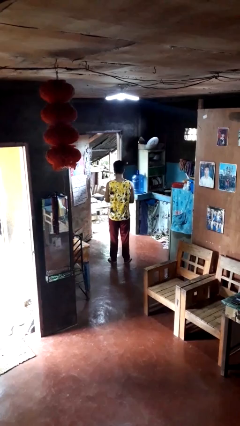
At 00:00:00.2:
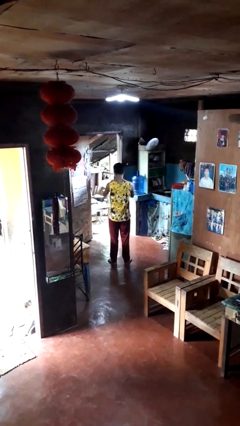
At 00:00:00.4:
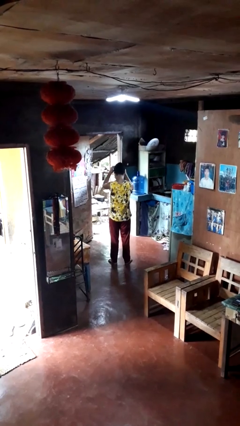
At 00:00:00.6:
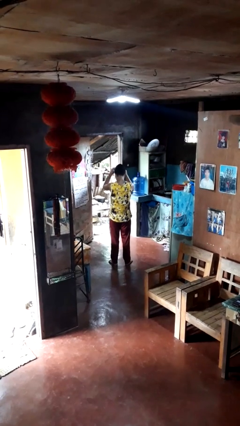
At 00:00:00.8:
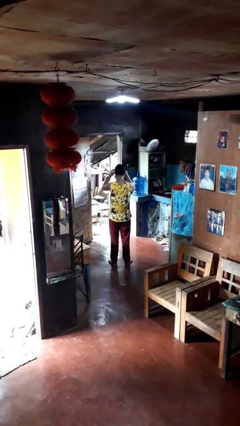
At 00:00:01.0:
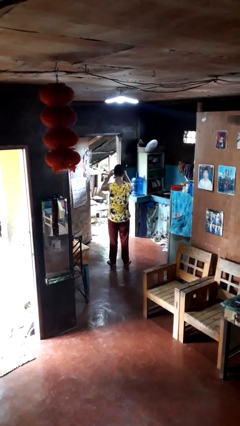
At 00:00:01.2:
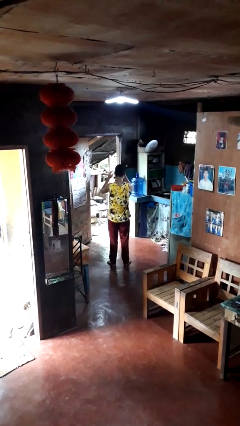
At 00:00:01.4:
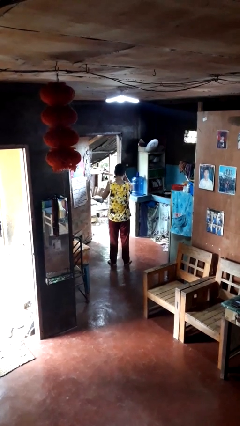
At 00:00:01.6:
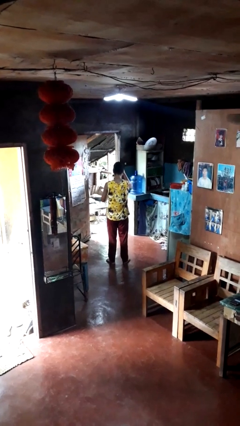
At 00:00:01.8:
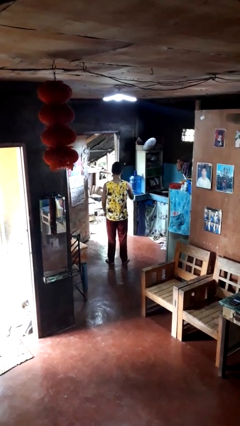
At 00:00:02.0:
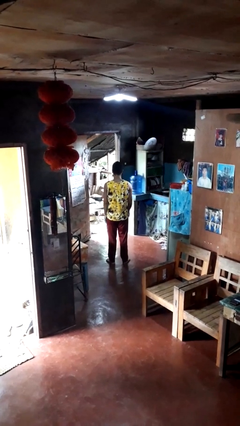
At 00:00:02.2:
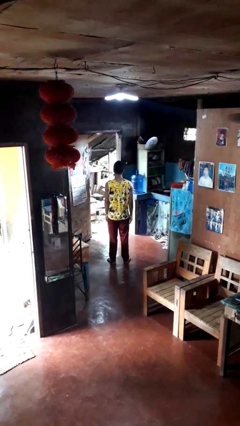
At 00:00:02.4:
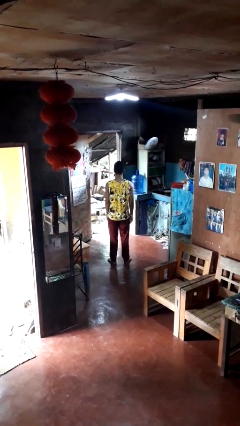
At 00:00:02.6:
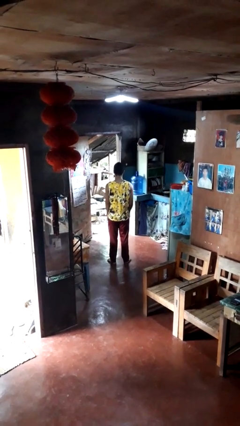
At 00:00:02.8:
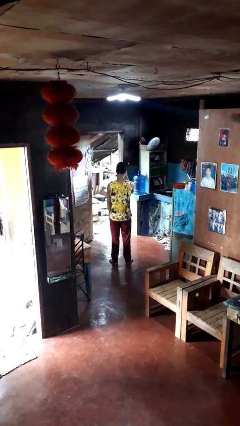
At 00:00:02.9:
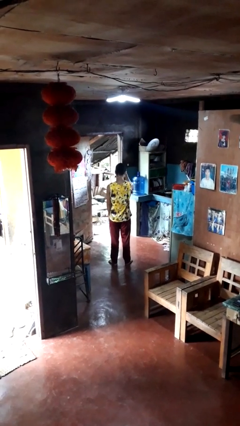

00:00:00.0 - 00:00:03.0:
person puts on hat

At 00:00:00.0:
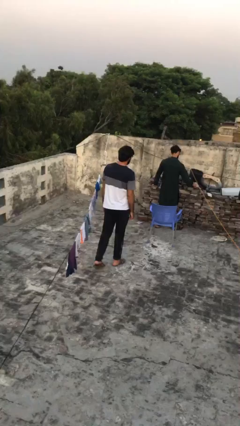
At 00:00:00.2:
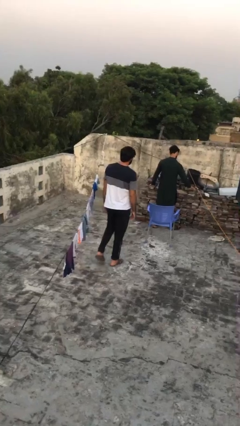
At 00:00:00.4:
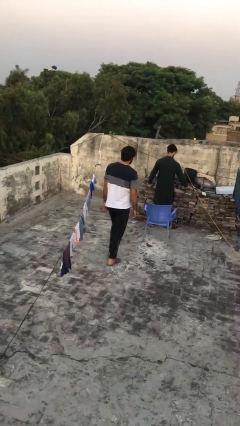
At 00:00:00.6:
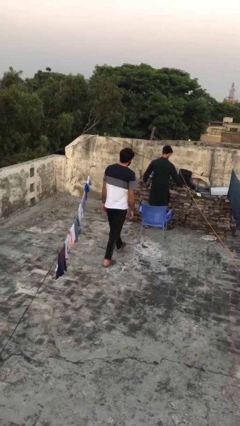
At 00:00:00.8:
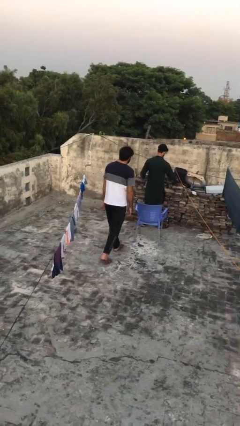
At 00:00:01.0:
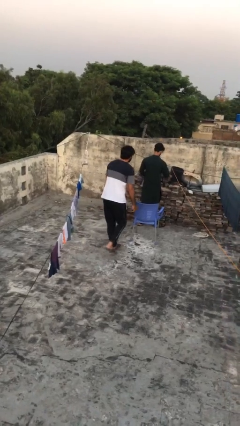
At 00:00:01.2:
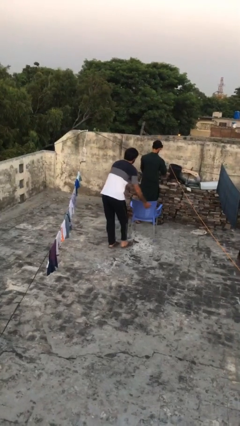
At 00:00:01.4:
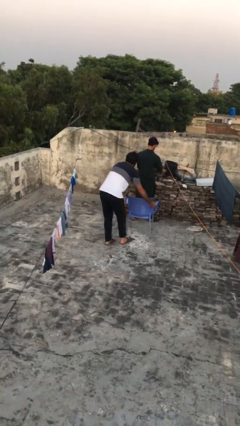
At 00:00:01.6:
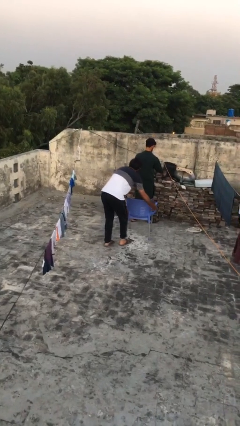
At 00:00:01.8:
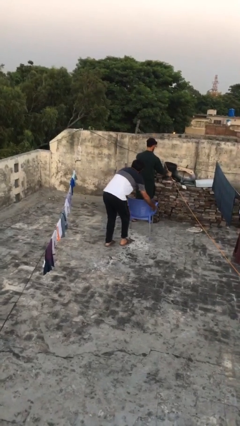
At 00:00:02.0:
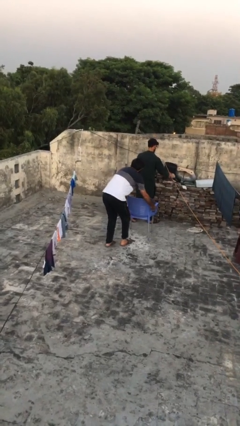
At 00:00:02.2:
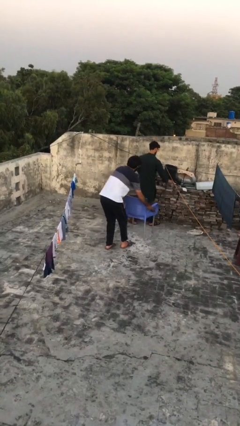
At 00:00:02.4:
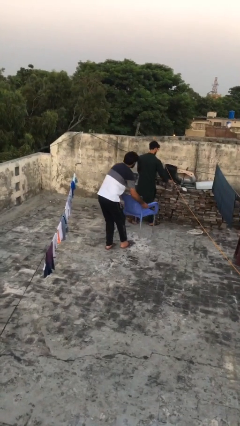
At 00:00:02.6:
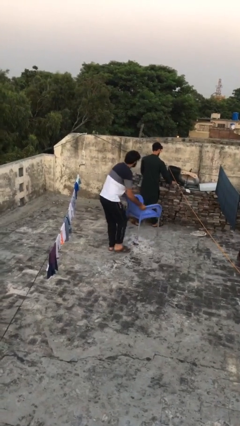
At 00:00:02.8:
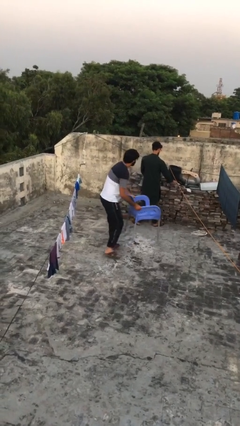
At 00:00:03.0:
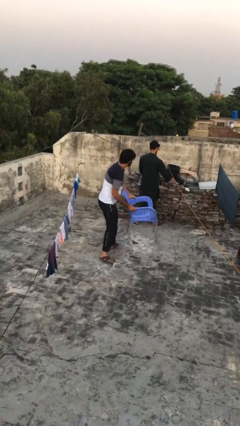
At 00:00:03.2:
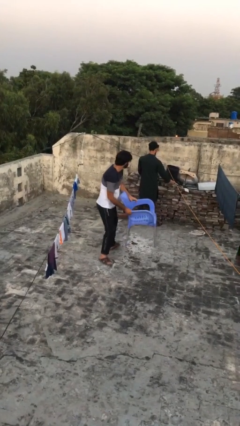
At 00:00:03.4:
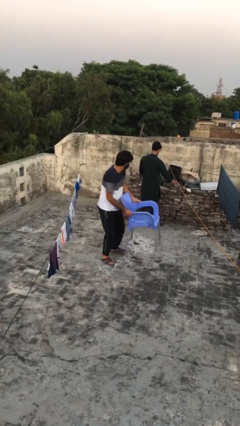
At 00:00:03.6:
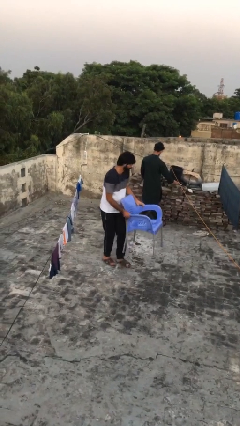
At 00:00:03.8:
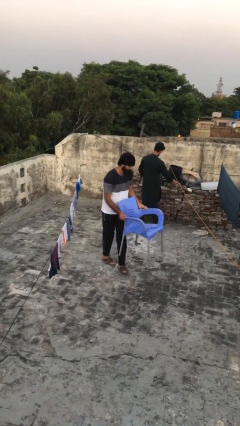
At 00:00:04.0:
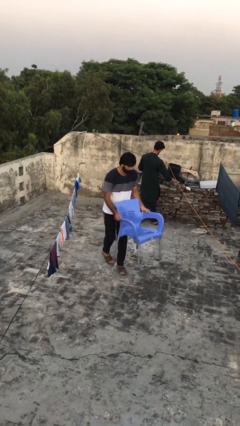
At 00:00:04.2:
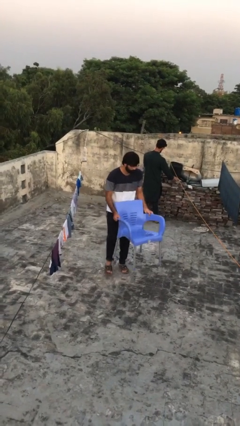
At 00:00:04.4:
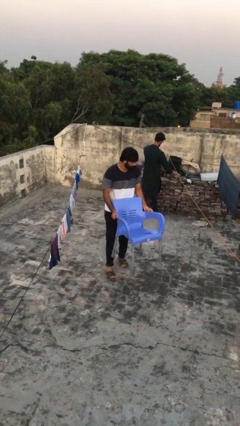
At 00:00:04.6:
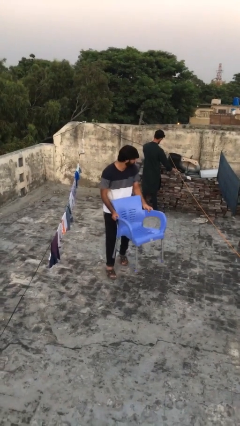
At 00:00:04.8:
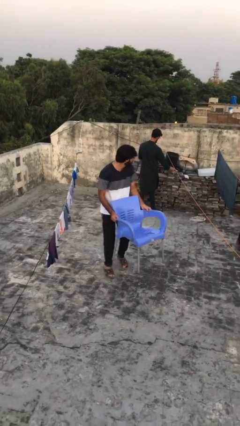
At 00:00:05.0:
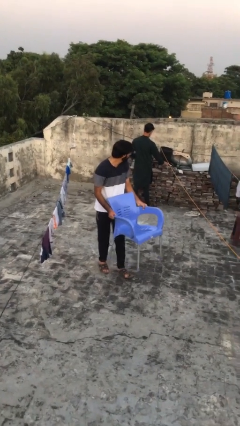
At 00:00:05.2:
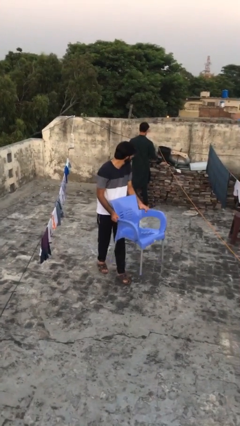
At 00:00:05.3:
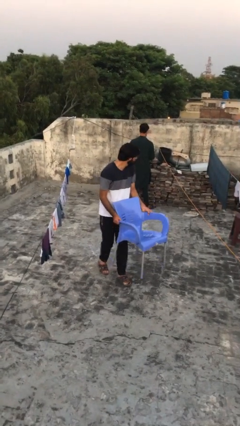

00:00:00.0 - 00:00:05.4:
person steals object from person

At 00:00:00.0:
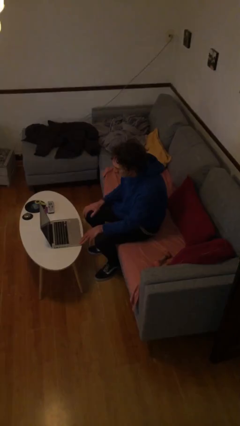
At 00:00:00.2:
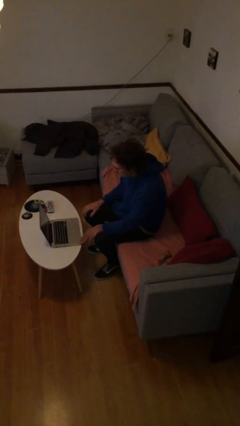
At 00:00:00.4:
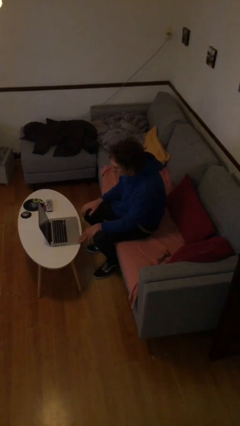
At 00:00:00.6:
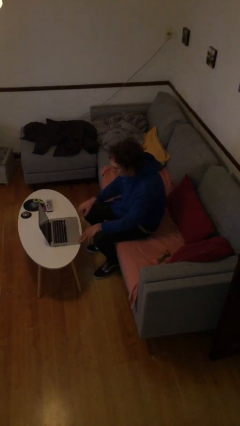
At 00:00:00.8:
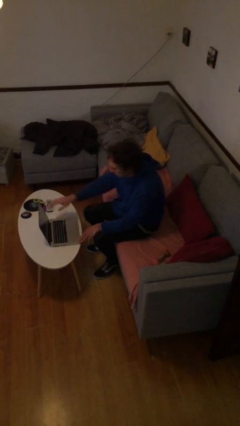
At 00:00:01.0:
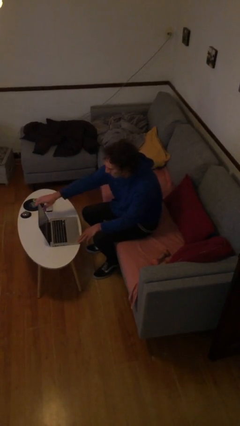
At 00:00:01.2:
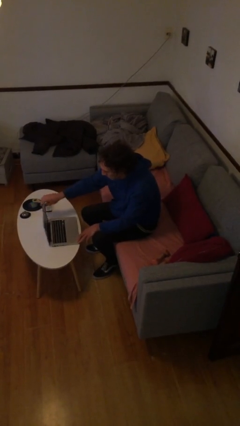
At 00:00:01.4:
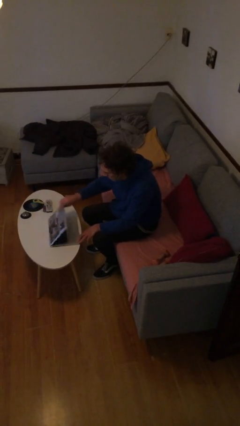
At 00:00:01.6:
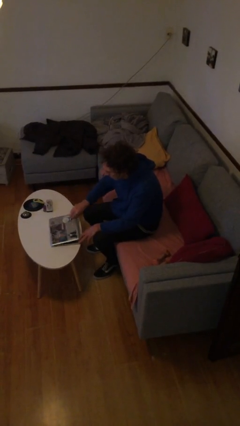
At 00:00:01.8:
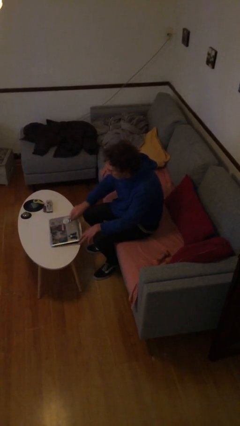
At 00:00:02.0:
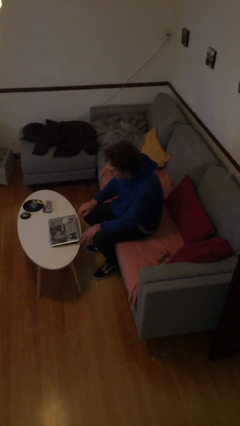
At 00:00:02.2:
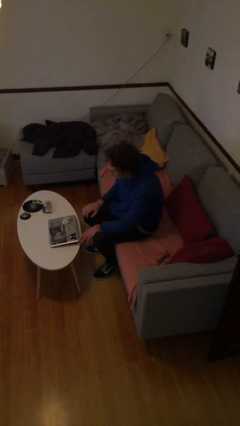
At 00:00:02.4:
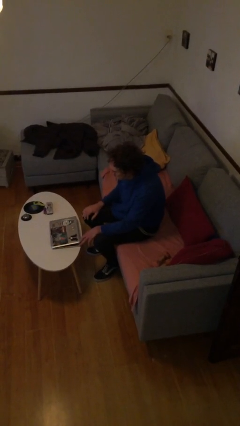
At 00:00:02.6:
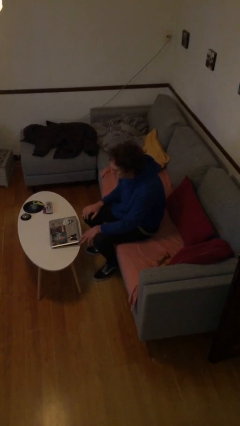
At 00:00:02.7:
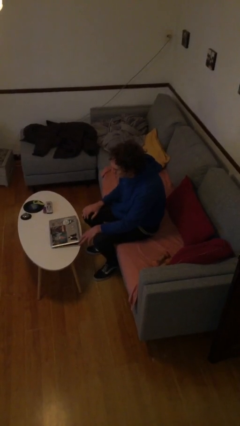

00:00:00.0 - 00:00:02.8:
person closes laptop

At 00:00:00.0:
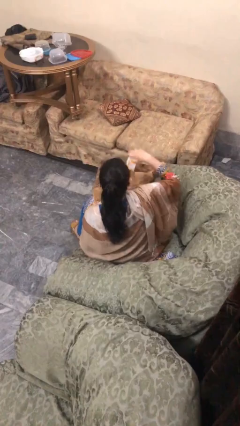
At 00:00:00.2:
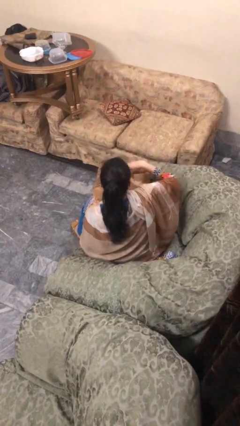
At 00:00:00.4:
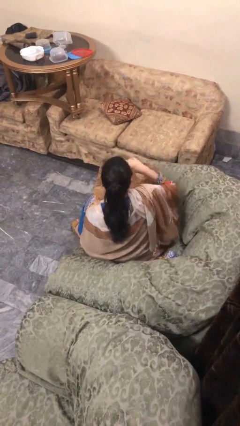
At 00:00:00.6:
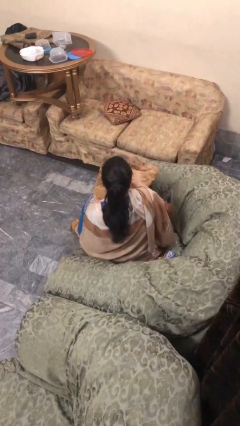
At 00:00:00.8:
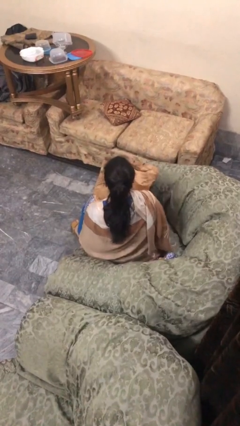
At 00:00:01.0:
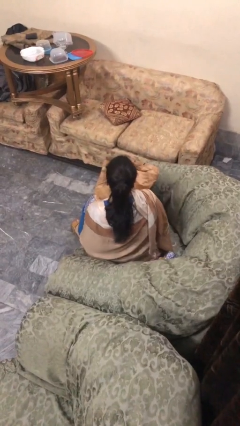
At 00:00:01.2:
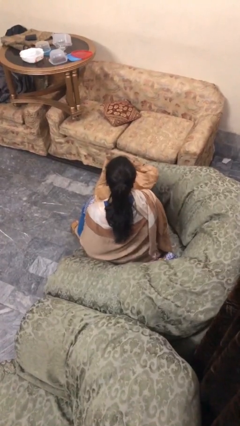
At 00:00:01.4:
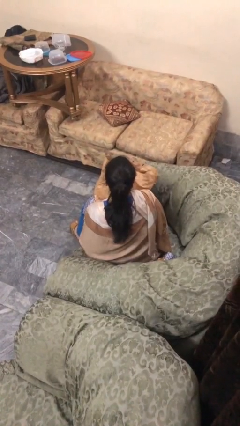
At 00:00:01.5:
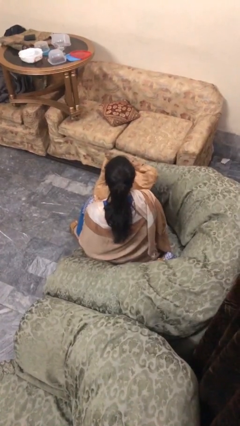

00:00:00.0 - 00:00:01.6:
person puts object into bag

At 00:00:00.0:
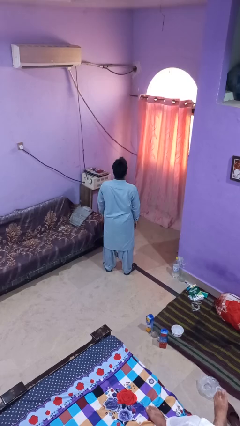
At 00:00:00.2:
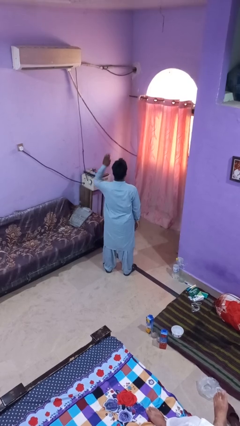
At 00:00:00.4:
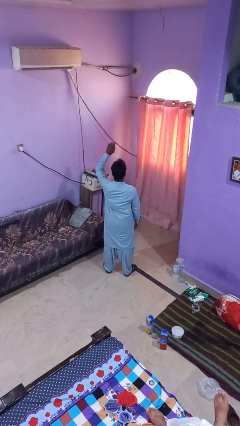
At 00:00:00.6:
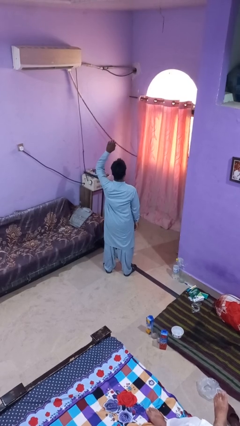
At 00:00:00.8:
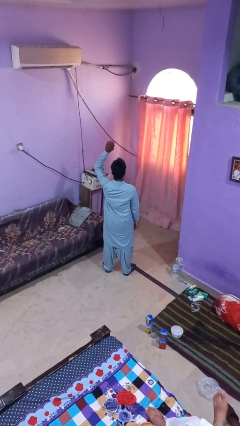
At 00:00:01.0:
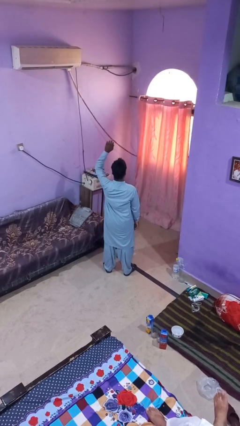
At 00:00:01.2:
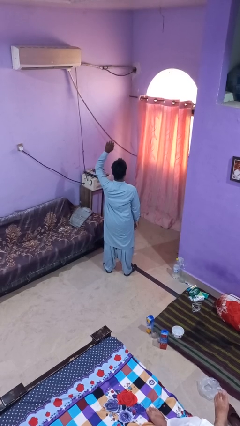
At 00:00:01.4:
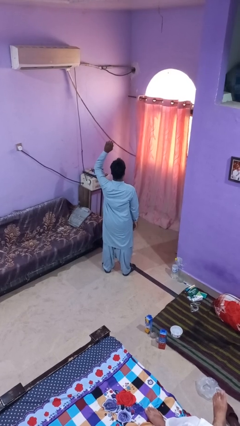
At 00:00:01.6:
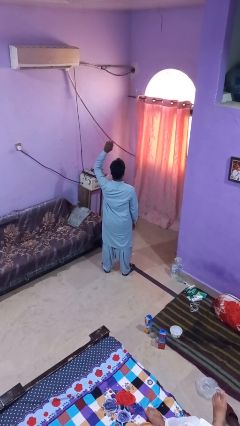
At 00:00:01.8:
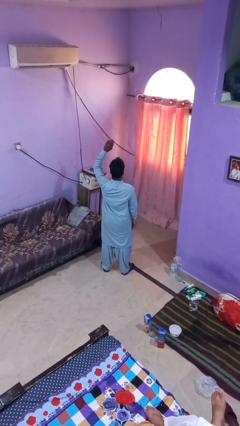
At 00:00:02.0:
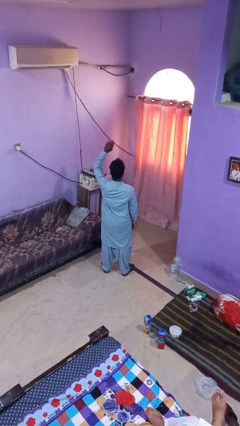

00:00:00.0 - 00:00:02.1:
person gestures raise hand

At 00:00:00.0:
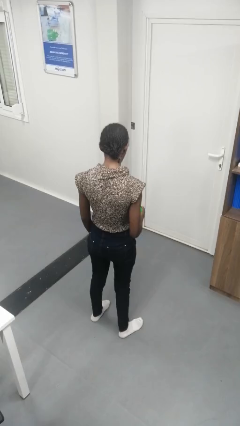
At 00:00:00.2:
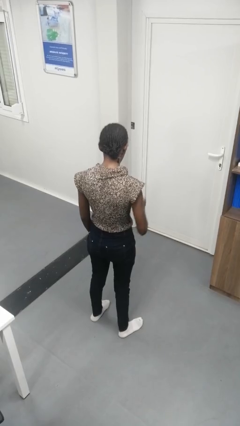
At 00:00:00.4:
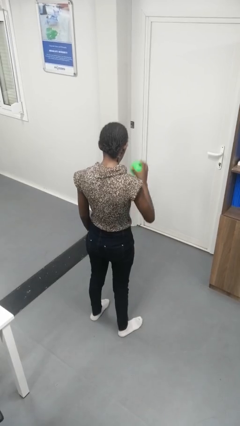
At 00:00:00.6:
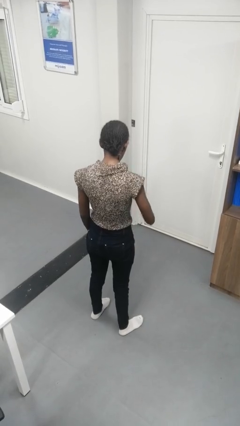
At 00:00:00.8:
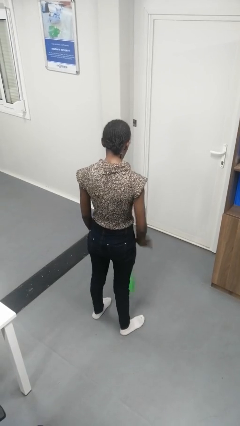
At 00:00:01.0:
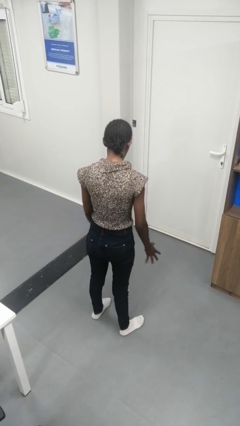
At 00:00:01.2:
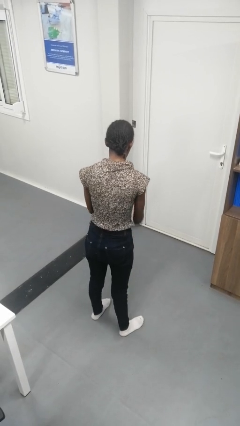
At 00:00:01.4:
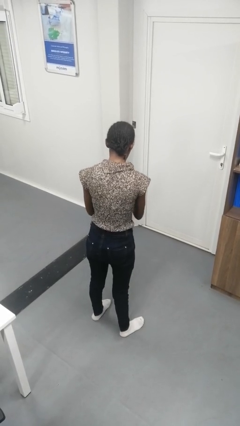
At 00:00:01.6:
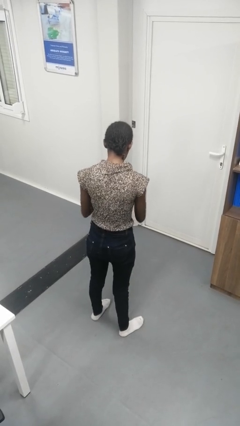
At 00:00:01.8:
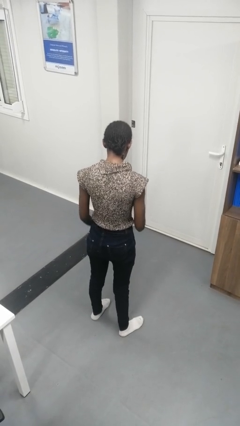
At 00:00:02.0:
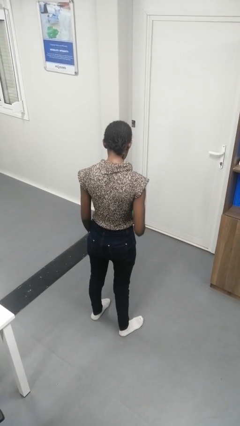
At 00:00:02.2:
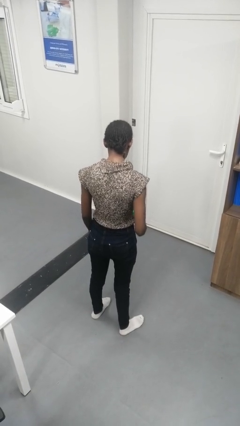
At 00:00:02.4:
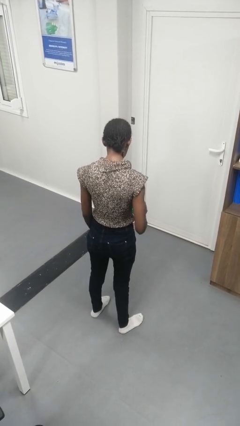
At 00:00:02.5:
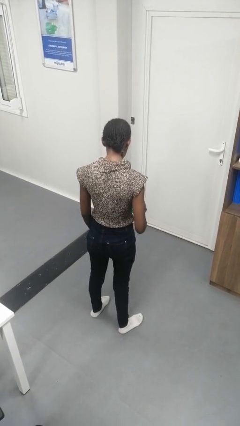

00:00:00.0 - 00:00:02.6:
person bounces ball on floor
